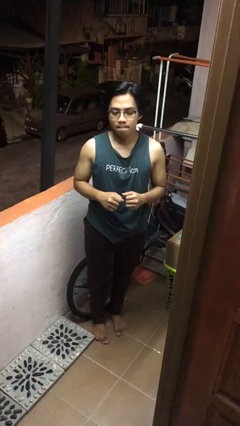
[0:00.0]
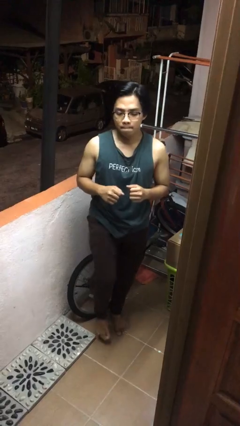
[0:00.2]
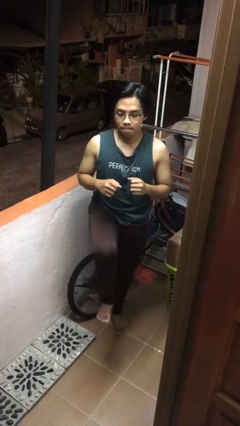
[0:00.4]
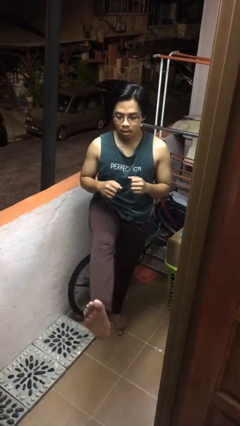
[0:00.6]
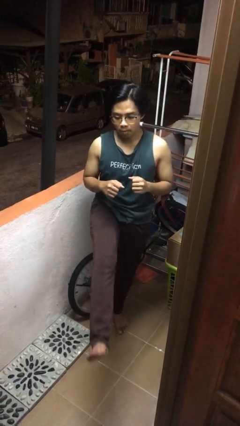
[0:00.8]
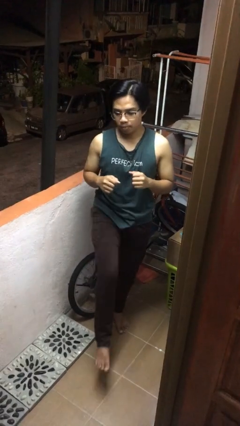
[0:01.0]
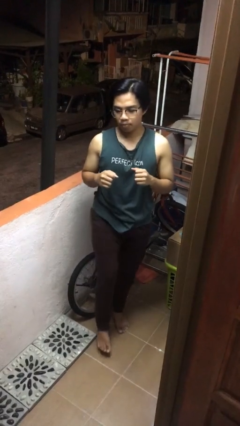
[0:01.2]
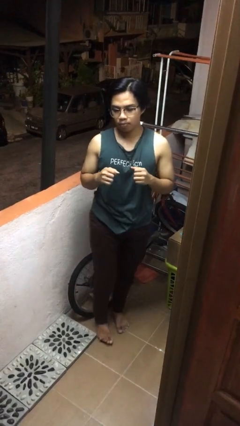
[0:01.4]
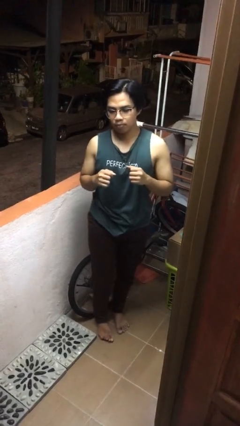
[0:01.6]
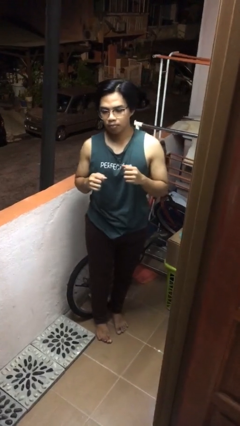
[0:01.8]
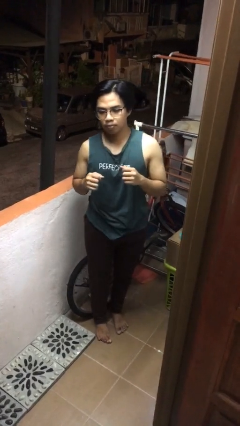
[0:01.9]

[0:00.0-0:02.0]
person karate kicks

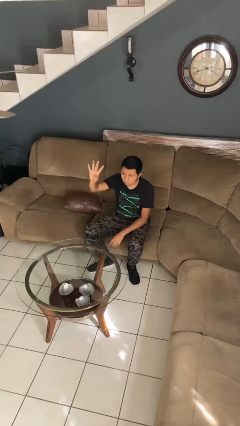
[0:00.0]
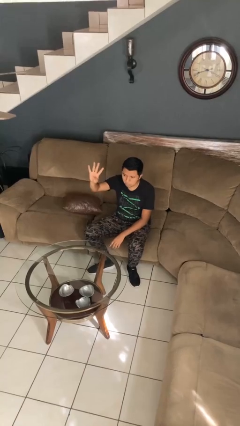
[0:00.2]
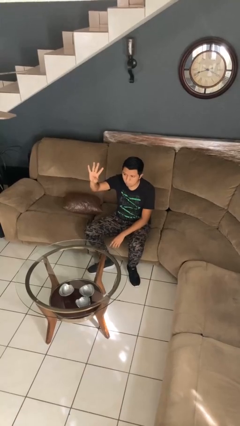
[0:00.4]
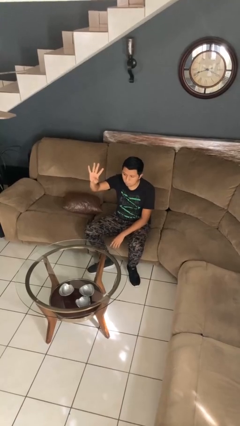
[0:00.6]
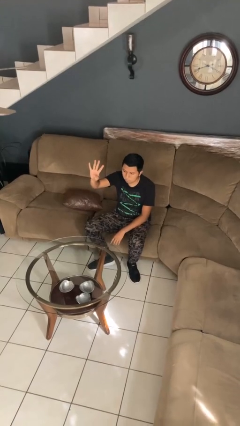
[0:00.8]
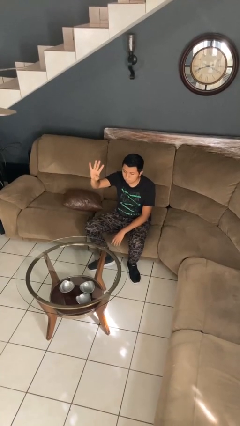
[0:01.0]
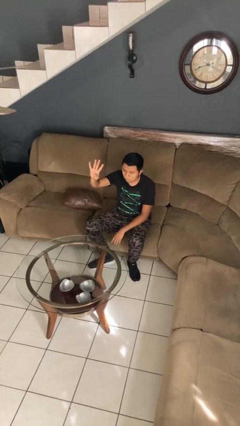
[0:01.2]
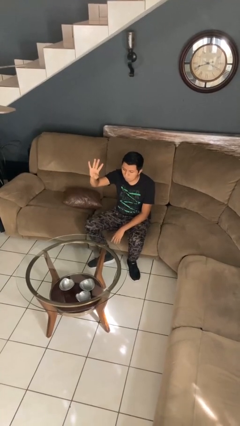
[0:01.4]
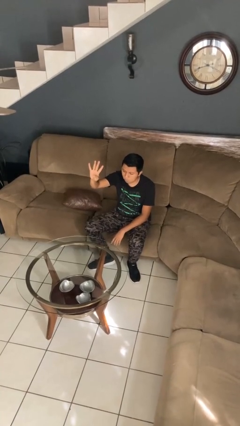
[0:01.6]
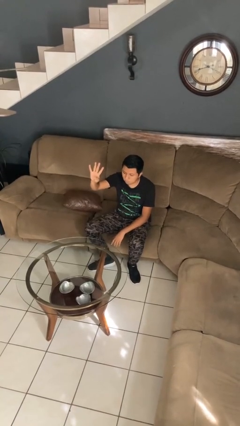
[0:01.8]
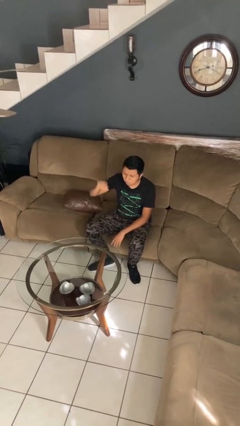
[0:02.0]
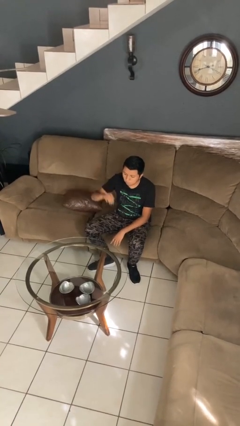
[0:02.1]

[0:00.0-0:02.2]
person gestures number four

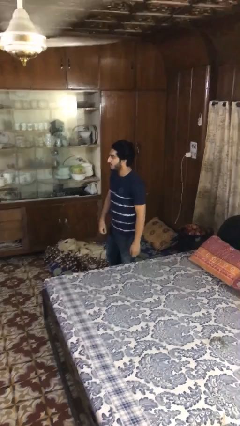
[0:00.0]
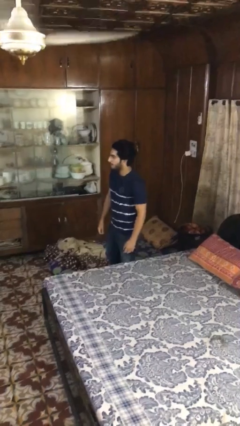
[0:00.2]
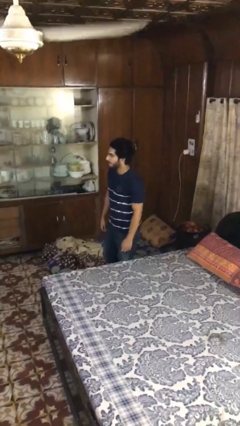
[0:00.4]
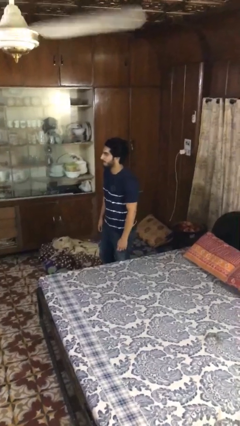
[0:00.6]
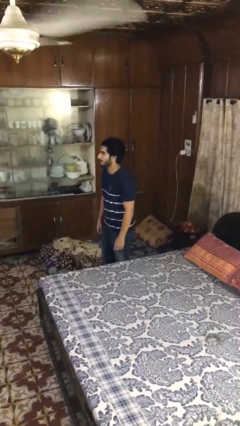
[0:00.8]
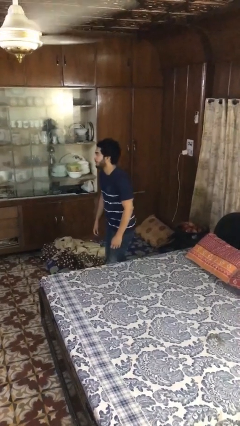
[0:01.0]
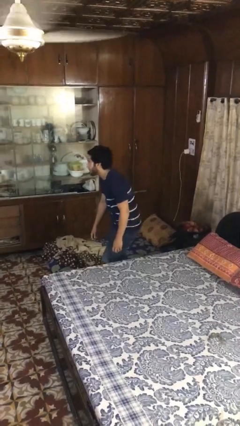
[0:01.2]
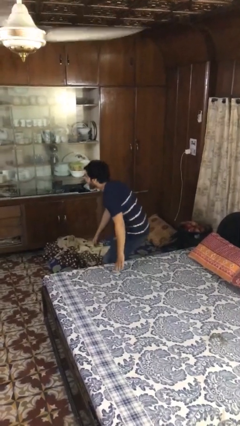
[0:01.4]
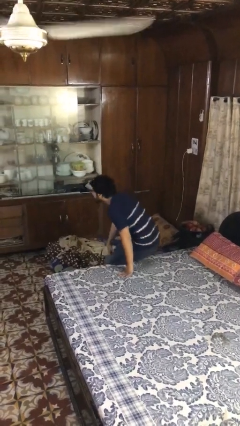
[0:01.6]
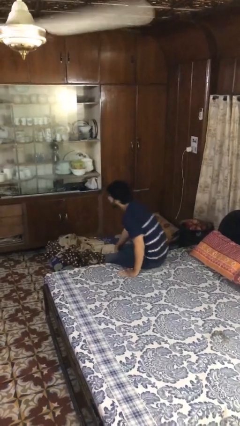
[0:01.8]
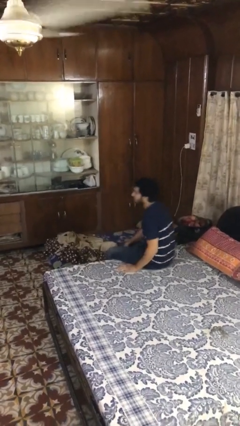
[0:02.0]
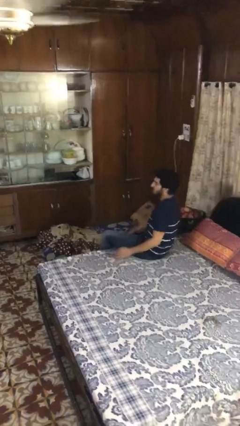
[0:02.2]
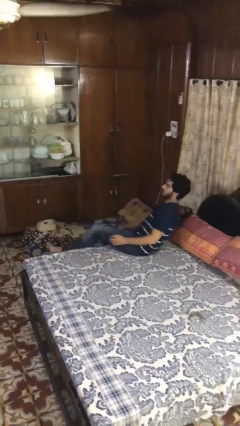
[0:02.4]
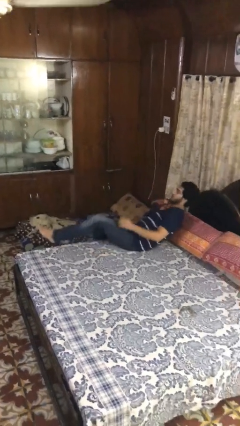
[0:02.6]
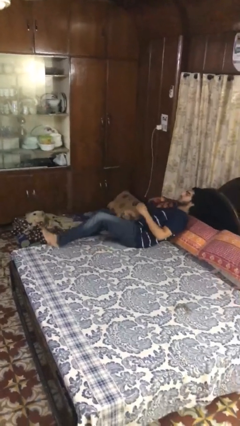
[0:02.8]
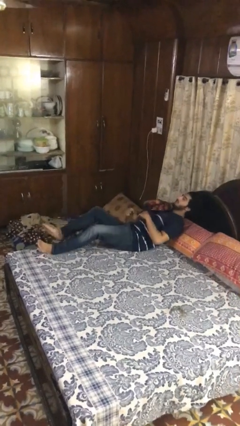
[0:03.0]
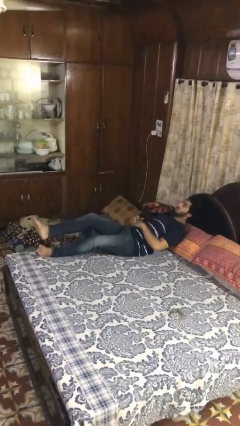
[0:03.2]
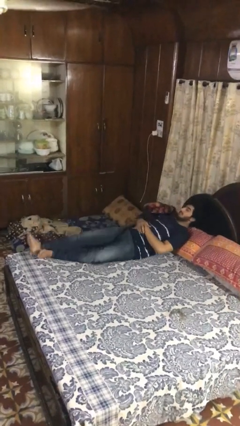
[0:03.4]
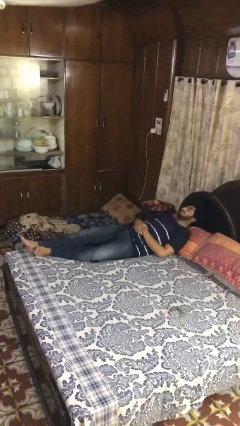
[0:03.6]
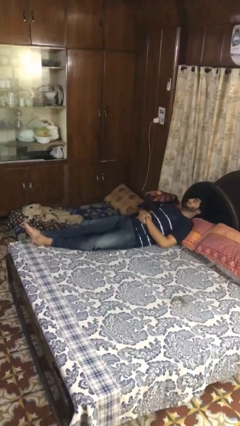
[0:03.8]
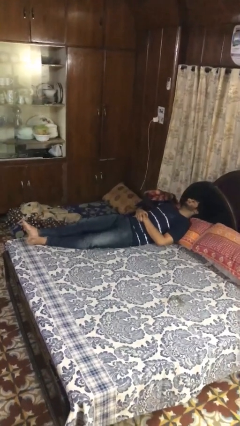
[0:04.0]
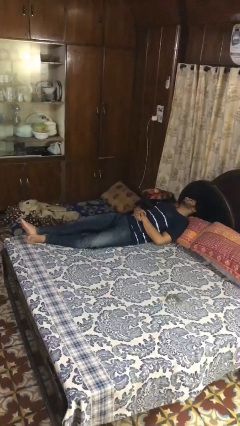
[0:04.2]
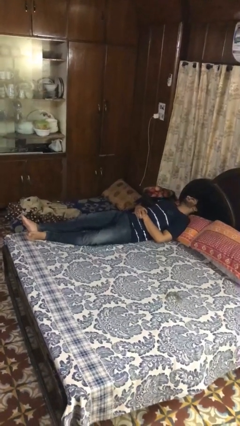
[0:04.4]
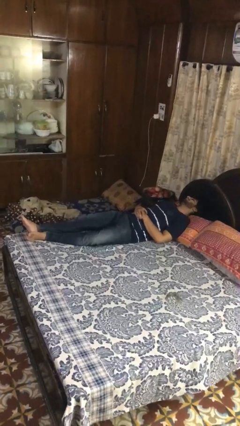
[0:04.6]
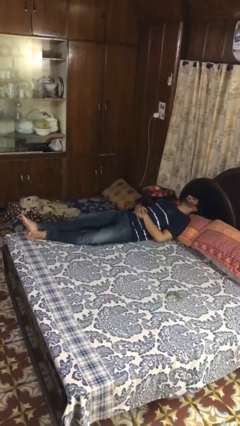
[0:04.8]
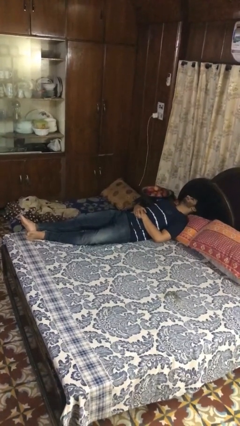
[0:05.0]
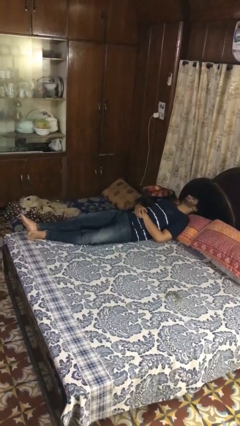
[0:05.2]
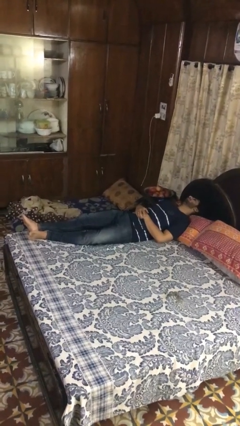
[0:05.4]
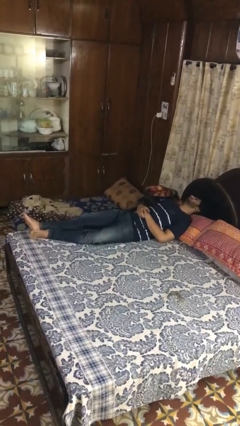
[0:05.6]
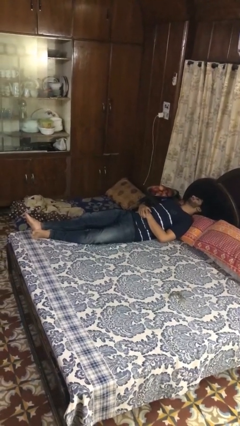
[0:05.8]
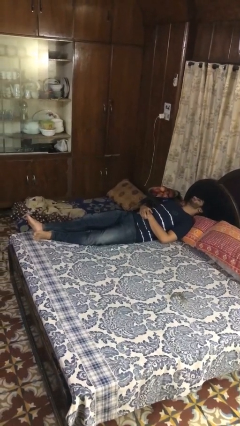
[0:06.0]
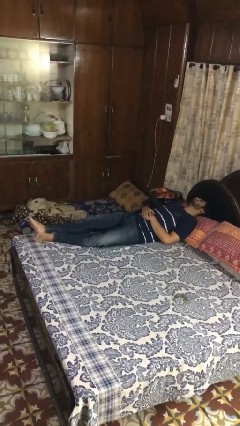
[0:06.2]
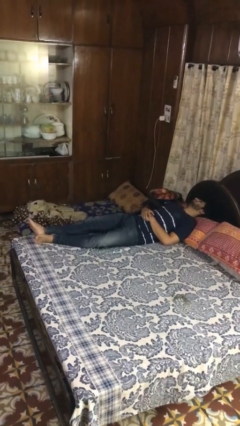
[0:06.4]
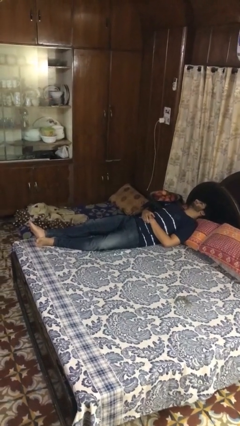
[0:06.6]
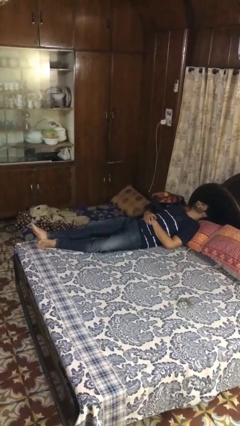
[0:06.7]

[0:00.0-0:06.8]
person lies down on bed

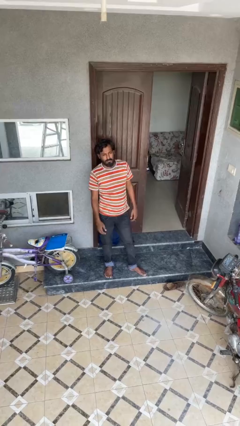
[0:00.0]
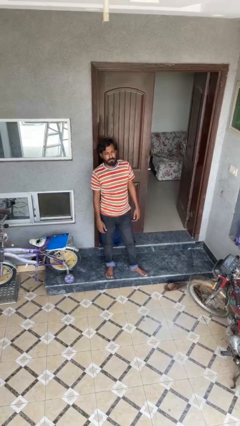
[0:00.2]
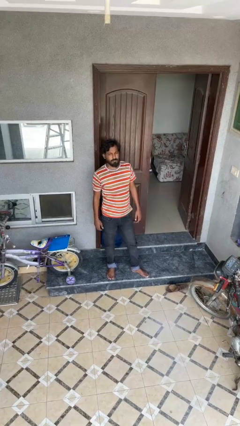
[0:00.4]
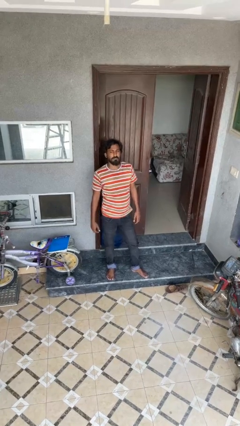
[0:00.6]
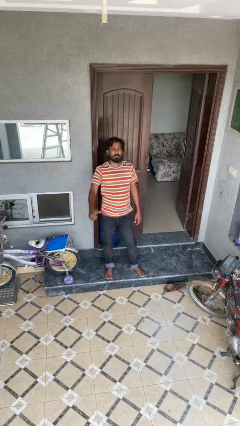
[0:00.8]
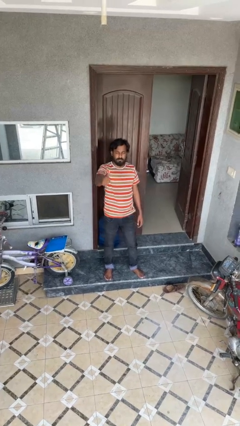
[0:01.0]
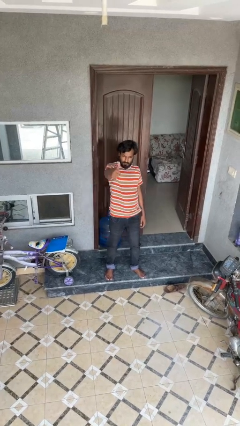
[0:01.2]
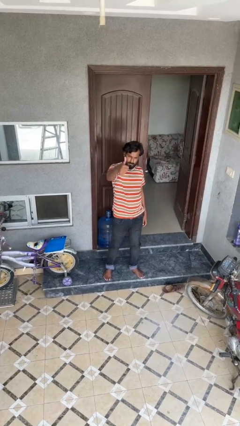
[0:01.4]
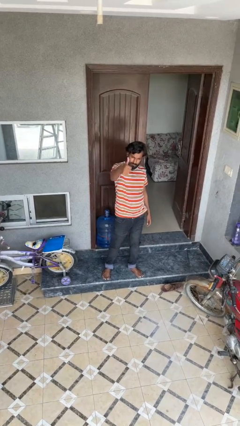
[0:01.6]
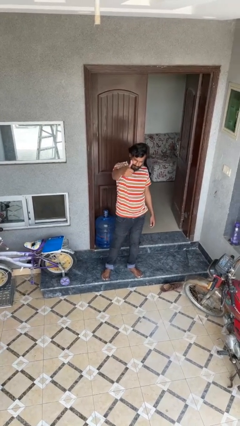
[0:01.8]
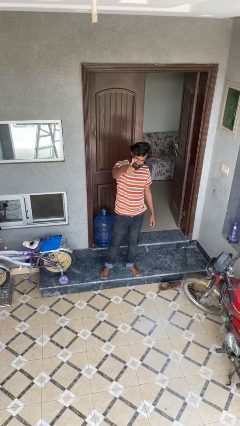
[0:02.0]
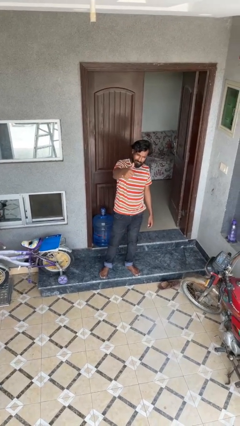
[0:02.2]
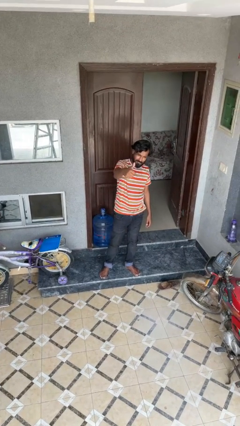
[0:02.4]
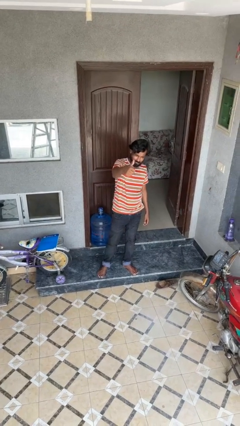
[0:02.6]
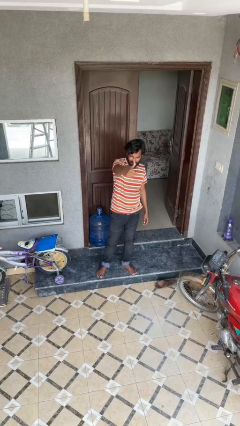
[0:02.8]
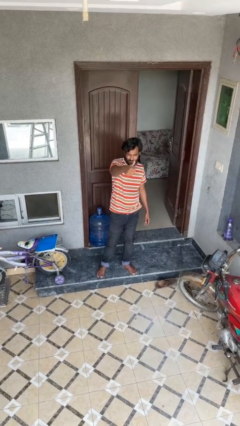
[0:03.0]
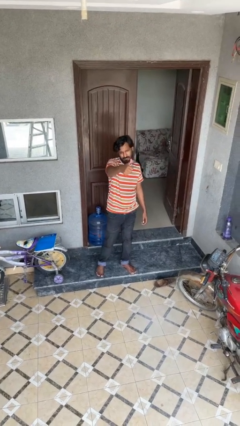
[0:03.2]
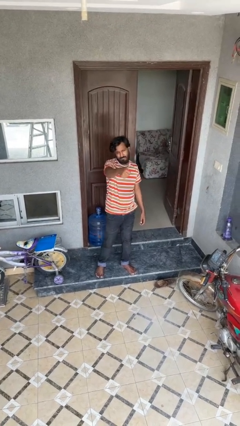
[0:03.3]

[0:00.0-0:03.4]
person gestures thumbs up

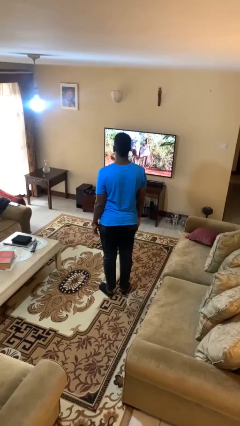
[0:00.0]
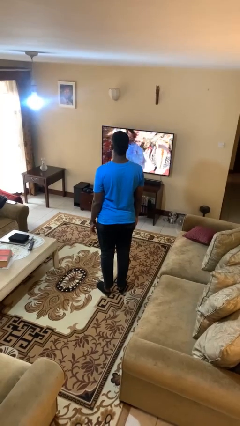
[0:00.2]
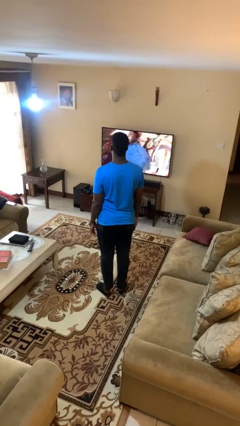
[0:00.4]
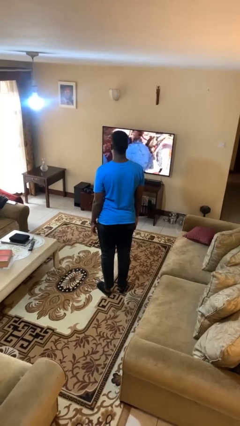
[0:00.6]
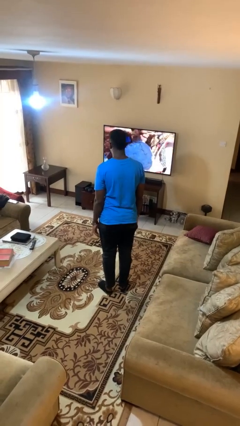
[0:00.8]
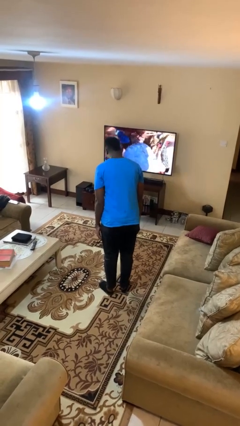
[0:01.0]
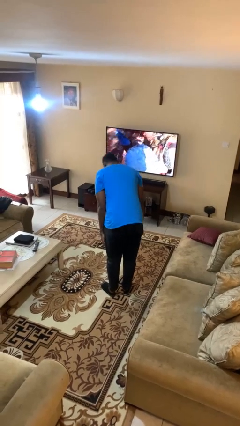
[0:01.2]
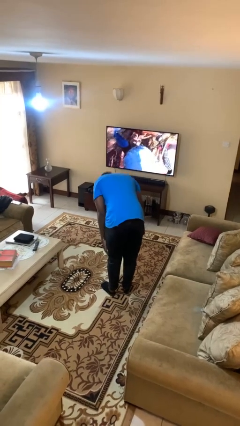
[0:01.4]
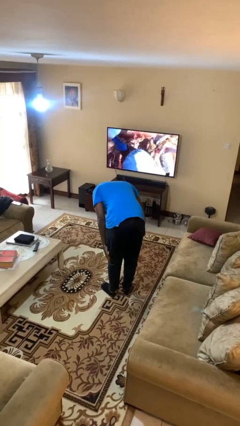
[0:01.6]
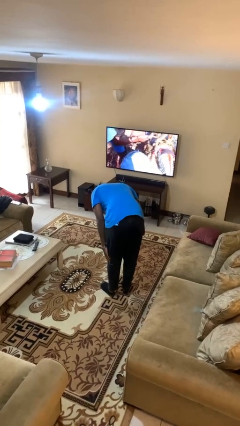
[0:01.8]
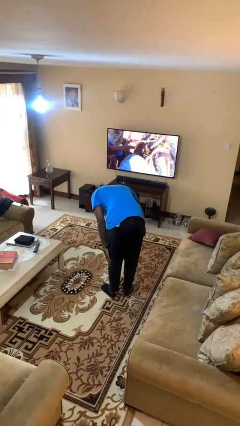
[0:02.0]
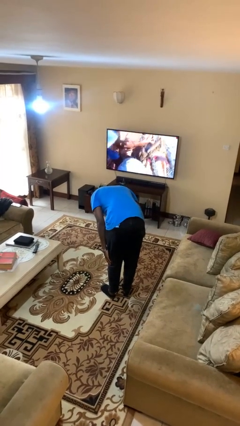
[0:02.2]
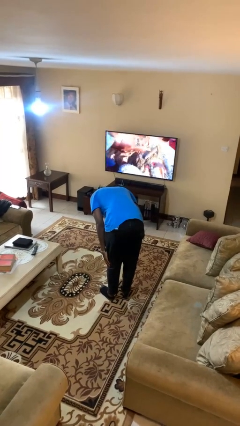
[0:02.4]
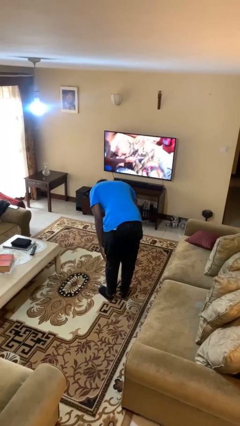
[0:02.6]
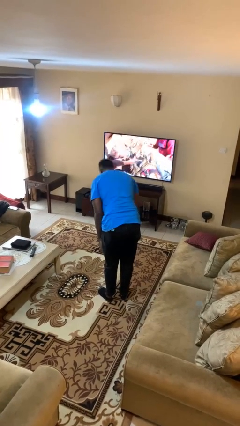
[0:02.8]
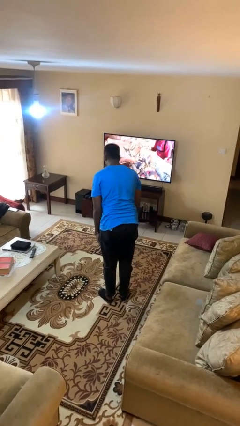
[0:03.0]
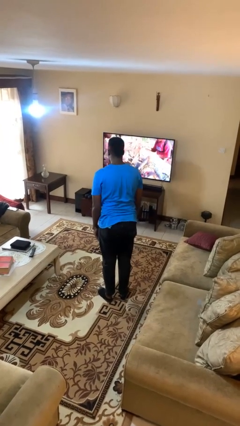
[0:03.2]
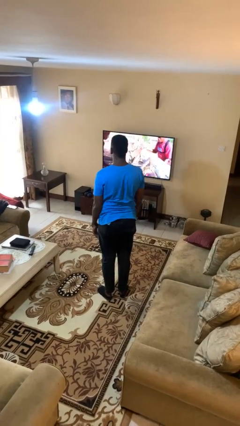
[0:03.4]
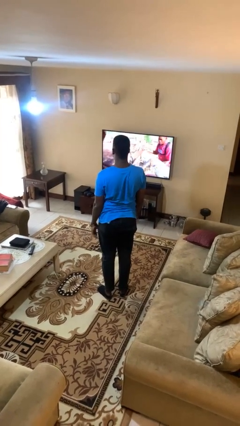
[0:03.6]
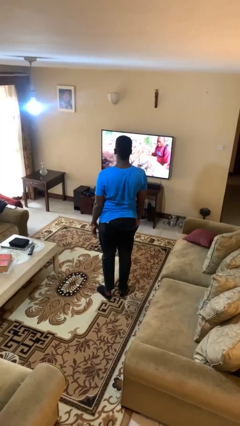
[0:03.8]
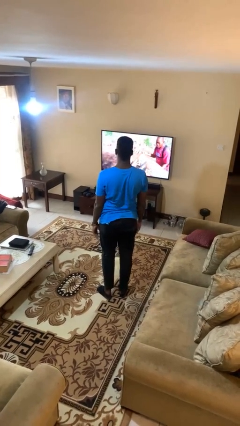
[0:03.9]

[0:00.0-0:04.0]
person bows
